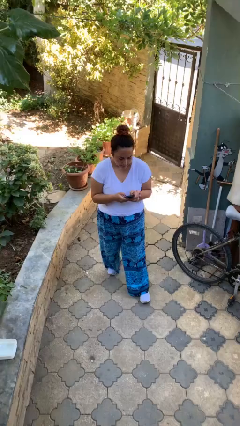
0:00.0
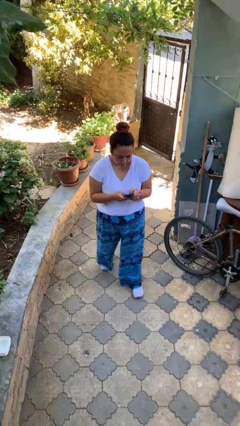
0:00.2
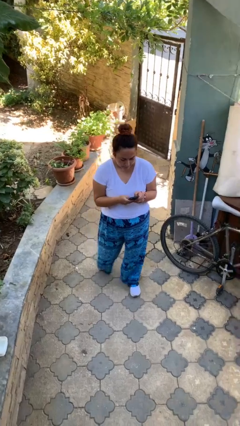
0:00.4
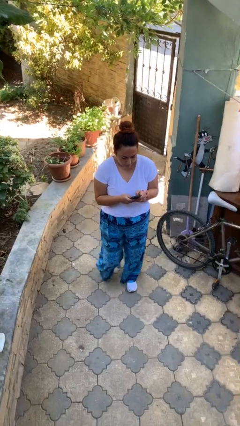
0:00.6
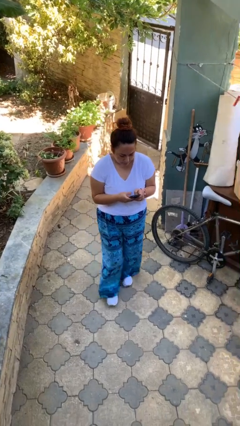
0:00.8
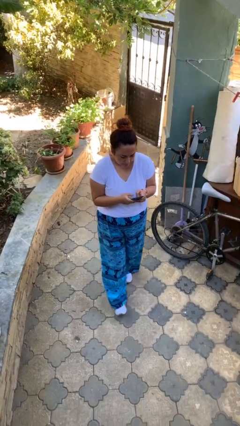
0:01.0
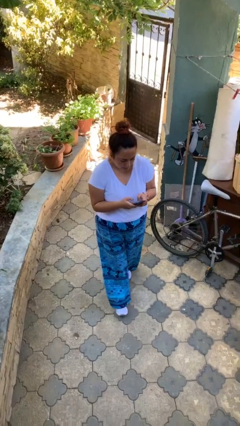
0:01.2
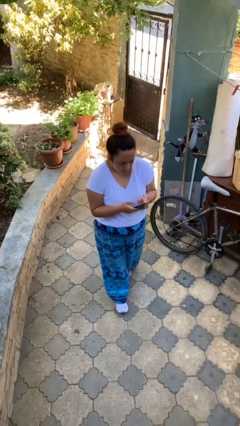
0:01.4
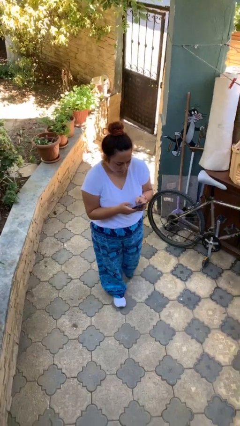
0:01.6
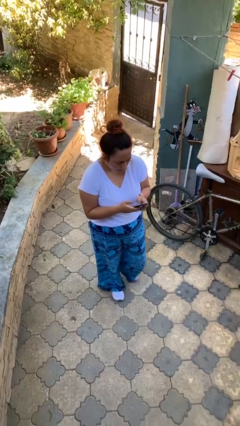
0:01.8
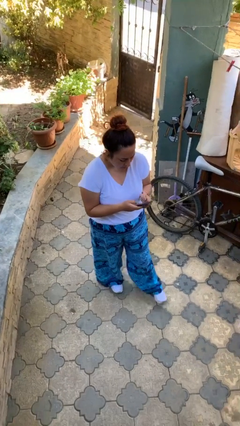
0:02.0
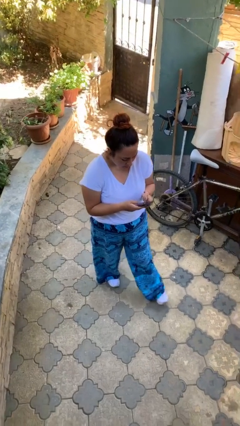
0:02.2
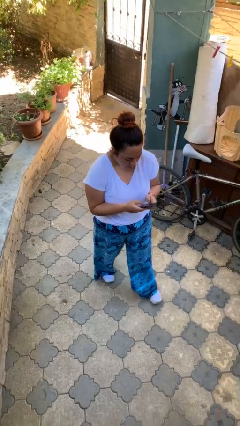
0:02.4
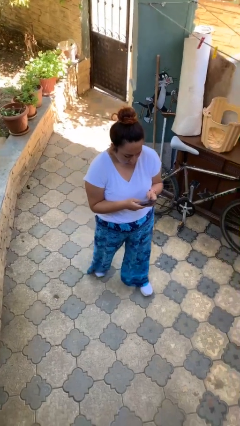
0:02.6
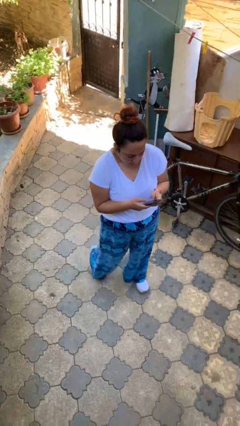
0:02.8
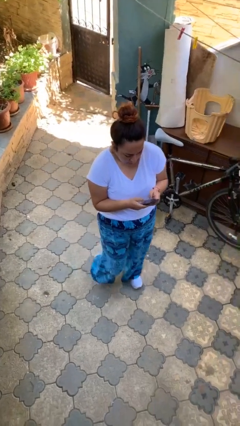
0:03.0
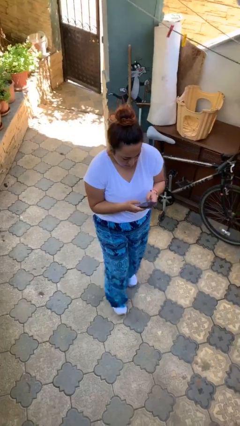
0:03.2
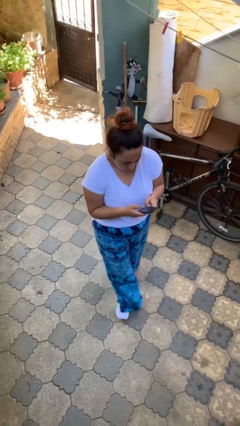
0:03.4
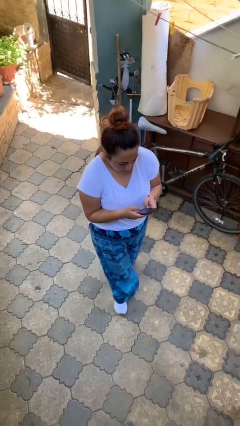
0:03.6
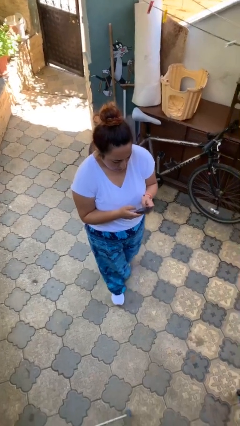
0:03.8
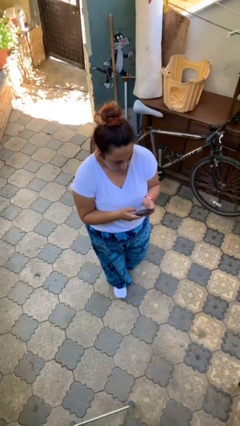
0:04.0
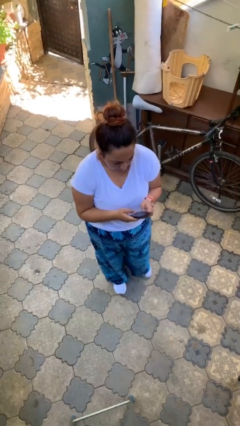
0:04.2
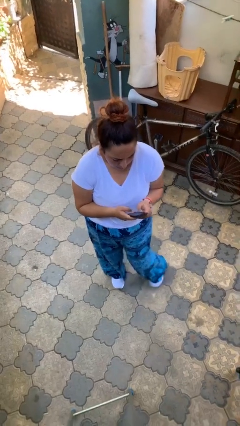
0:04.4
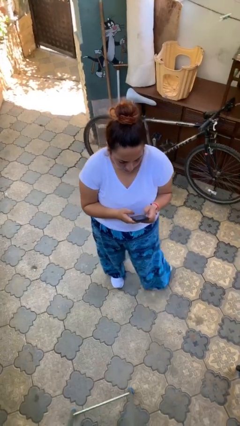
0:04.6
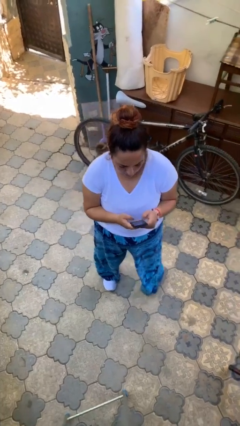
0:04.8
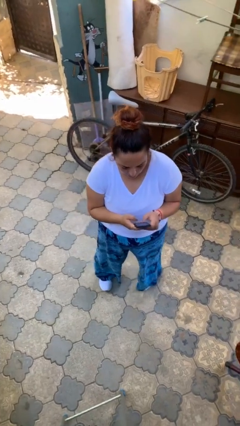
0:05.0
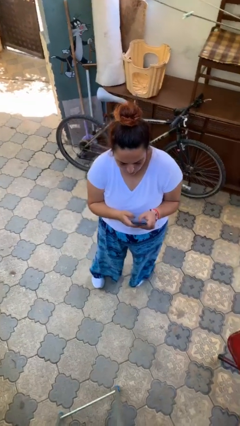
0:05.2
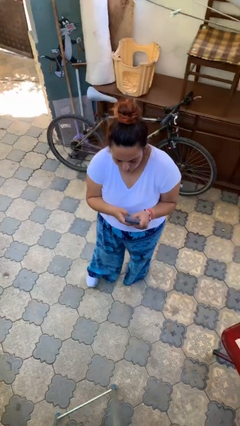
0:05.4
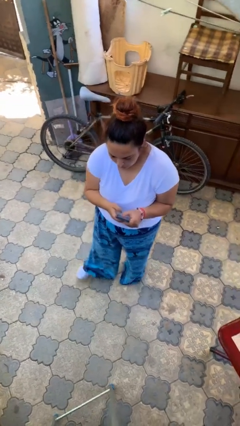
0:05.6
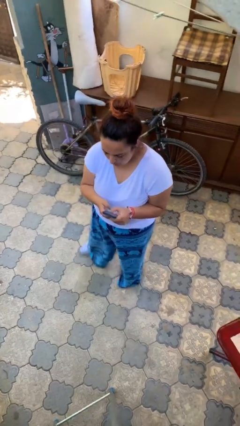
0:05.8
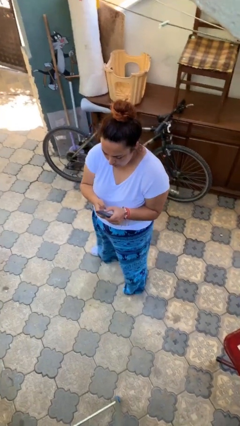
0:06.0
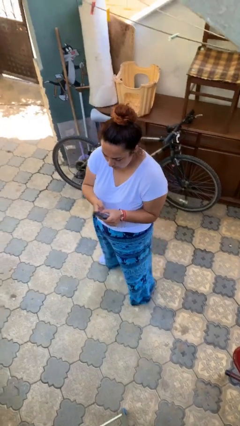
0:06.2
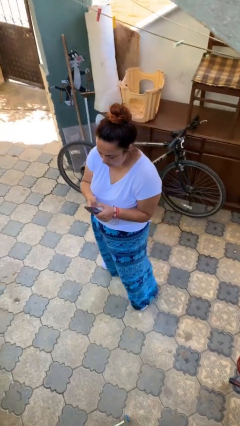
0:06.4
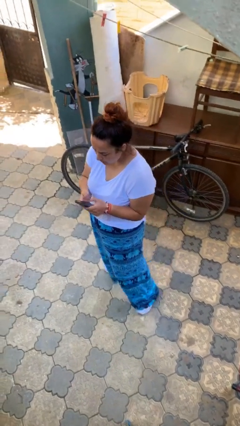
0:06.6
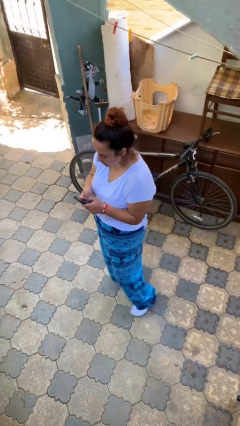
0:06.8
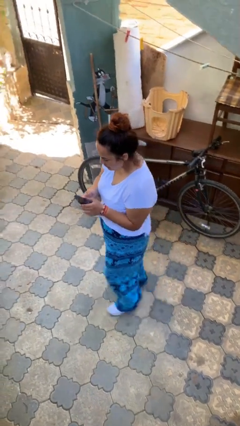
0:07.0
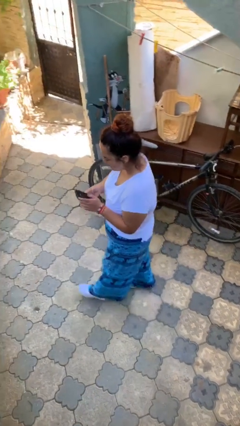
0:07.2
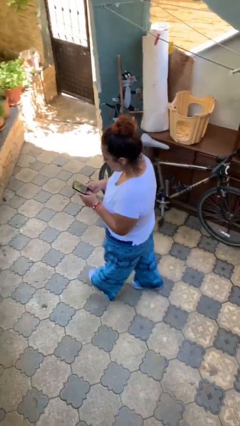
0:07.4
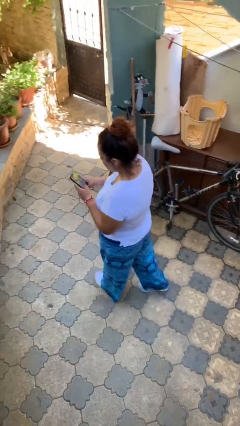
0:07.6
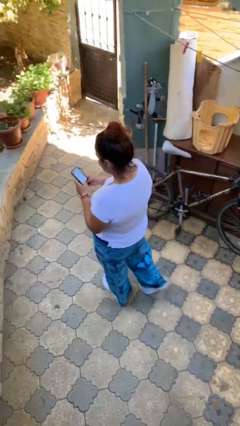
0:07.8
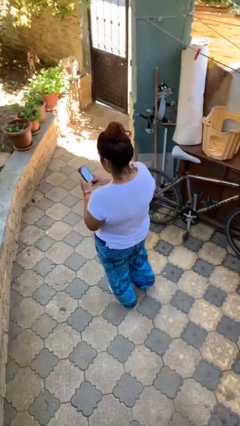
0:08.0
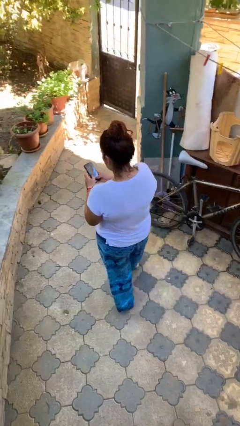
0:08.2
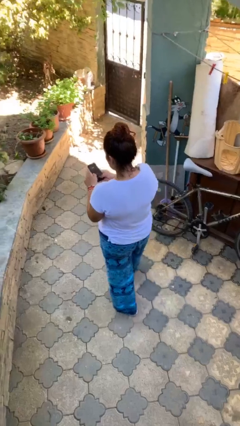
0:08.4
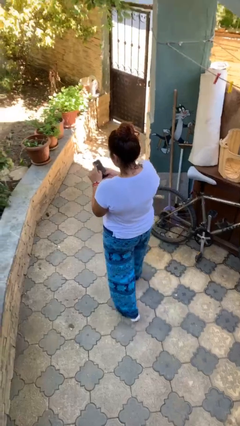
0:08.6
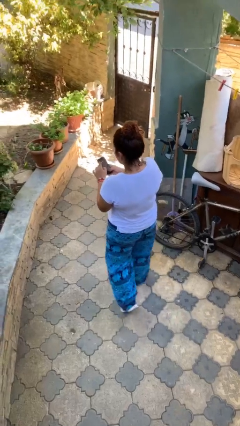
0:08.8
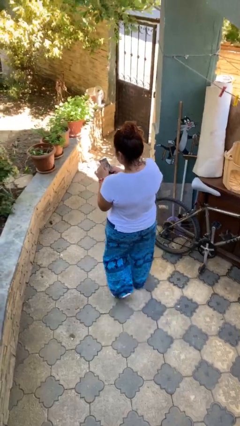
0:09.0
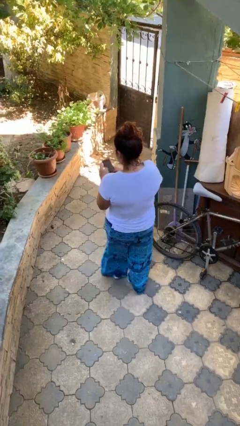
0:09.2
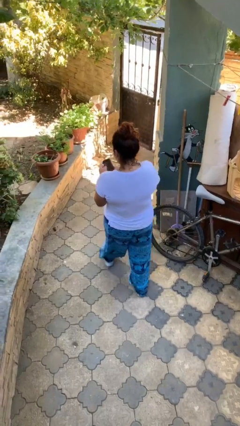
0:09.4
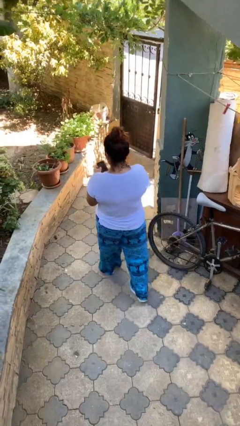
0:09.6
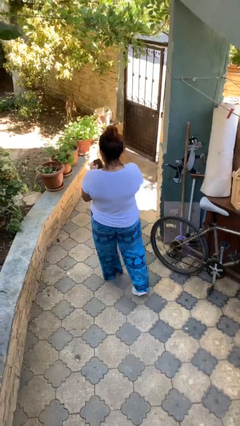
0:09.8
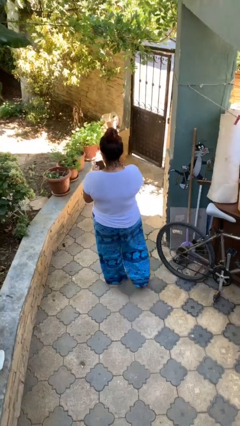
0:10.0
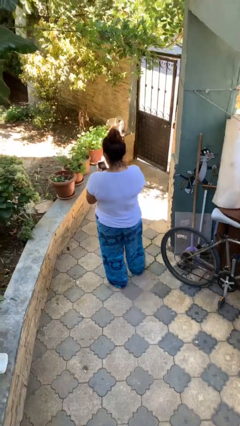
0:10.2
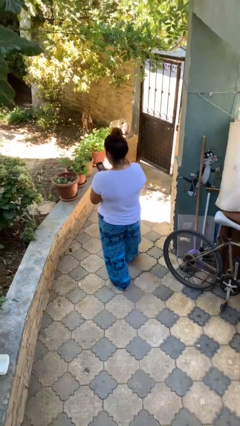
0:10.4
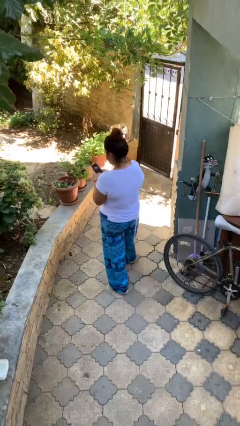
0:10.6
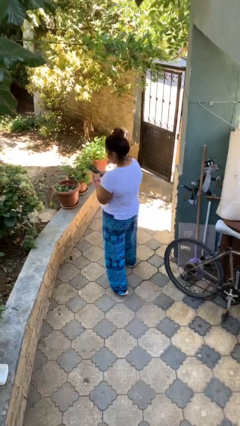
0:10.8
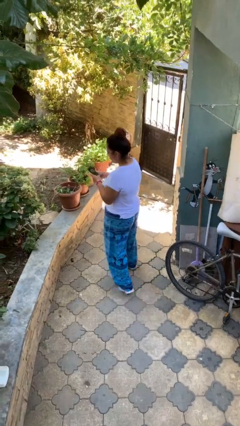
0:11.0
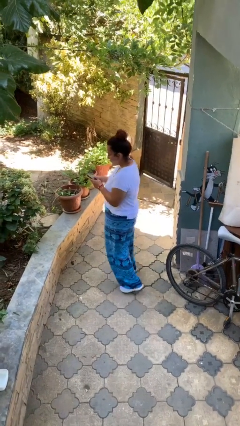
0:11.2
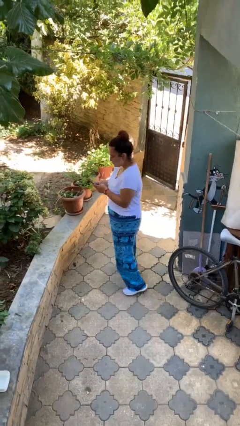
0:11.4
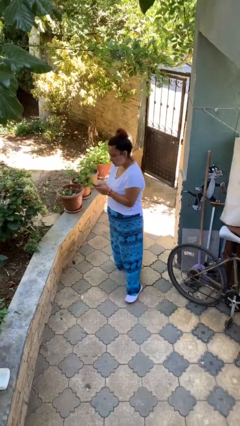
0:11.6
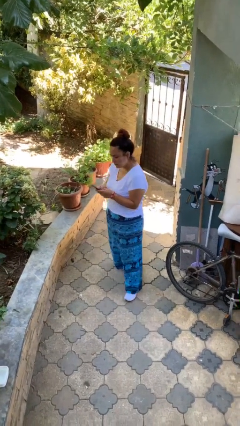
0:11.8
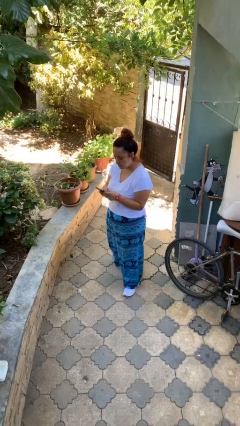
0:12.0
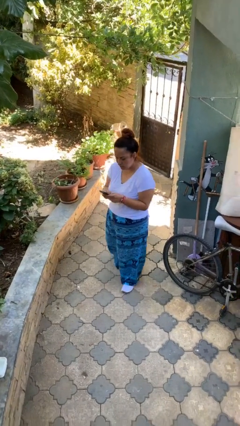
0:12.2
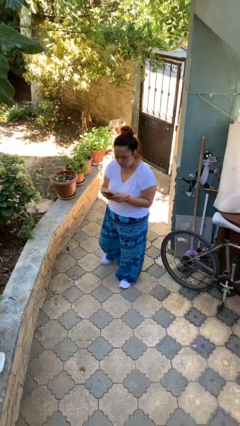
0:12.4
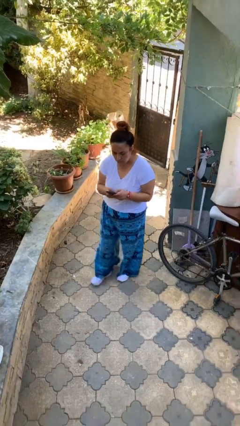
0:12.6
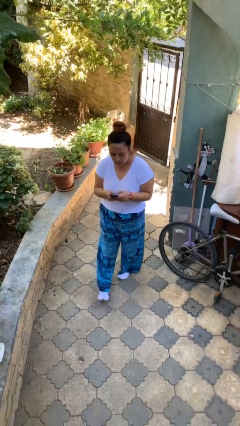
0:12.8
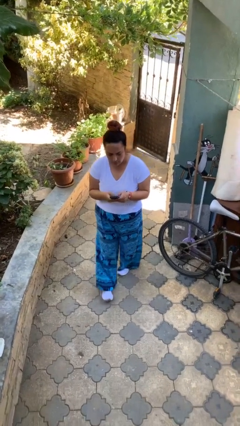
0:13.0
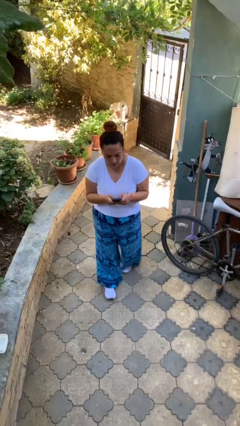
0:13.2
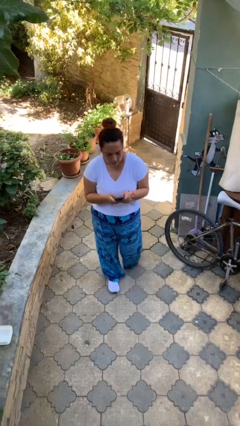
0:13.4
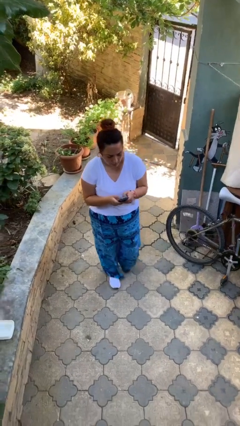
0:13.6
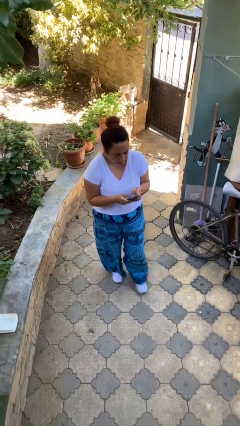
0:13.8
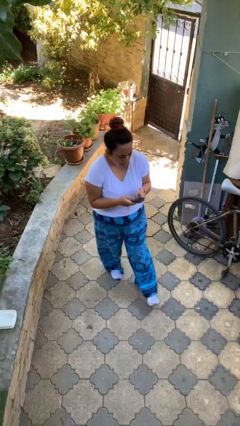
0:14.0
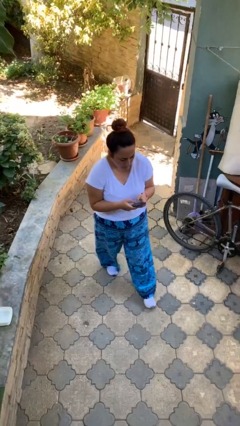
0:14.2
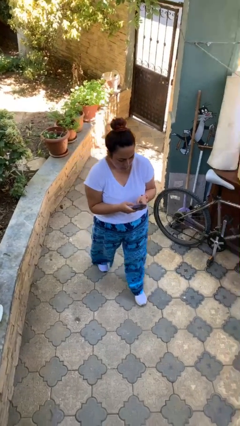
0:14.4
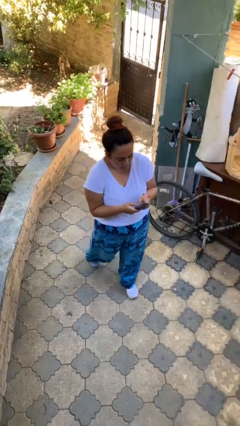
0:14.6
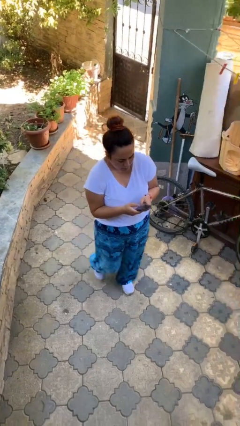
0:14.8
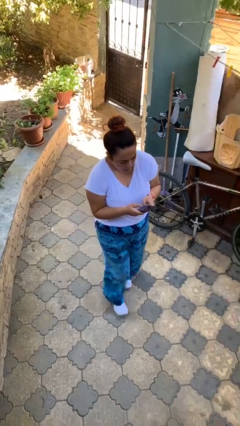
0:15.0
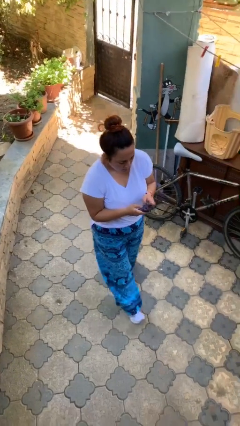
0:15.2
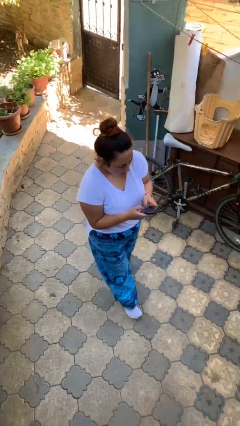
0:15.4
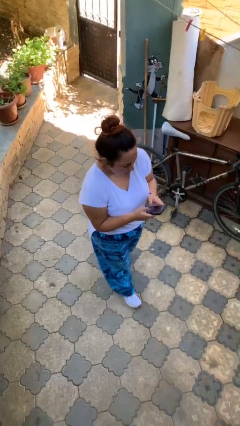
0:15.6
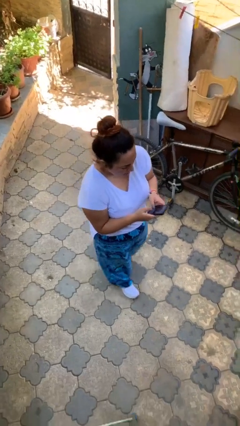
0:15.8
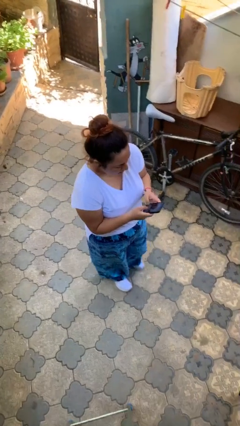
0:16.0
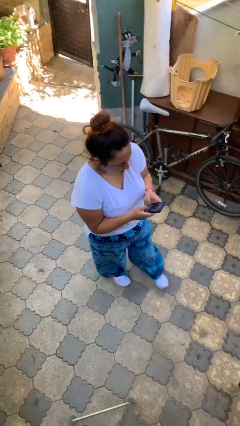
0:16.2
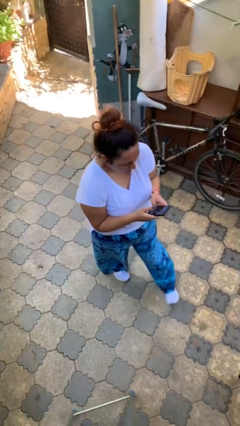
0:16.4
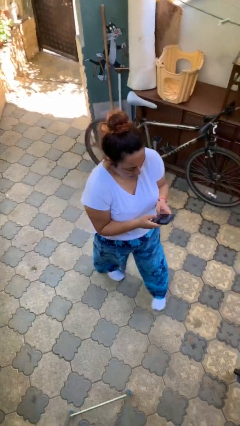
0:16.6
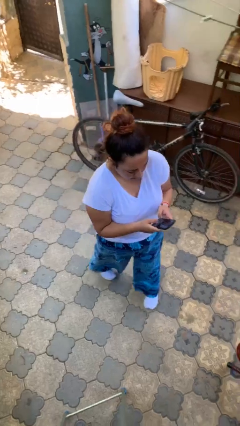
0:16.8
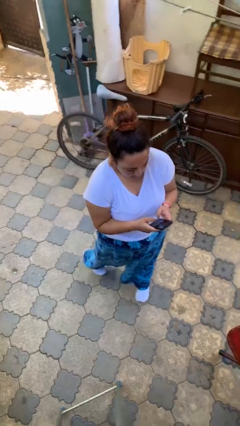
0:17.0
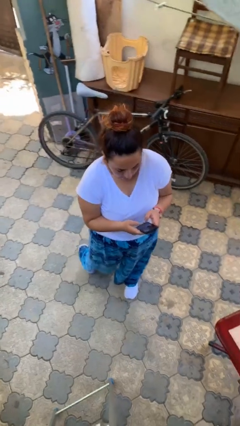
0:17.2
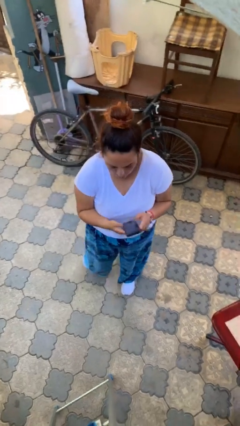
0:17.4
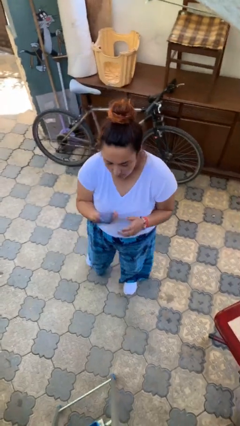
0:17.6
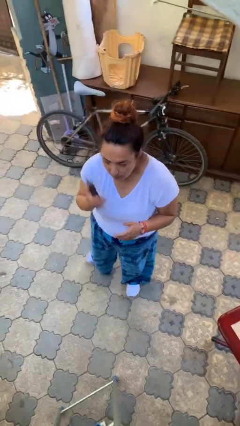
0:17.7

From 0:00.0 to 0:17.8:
person texts on phone
